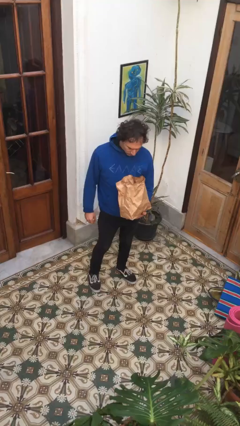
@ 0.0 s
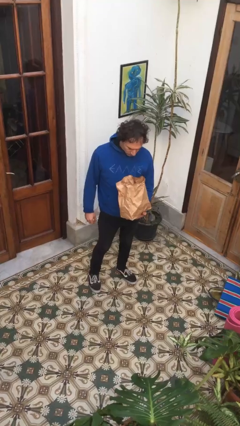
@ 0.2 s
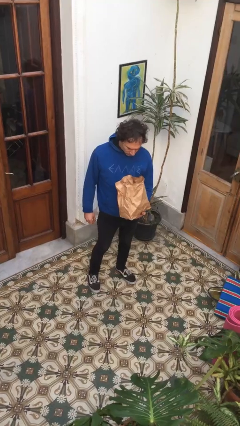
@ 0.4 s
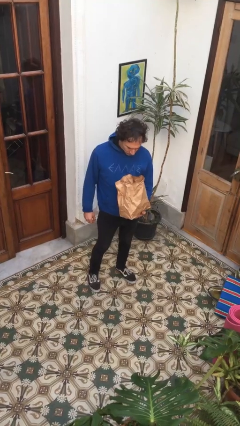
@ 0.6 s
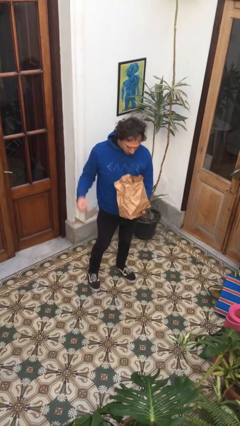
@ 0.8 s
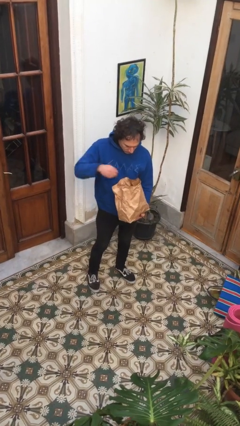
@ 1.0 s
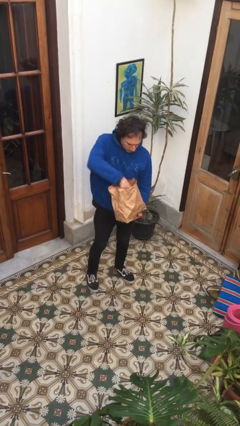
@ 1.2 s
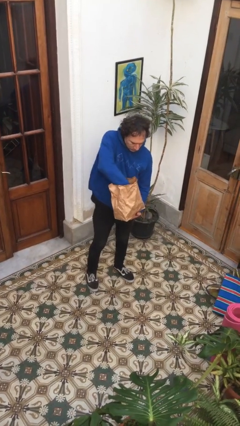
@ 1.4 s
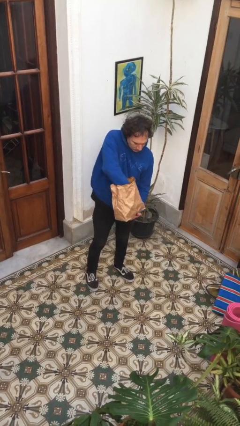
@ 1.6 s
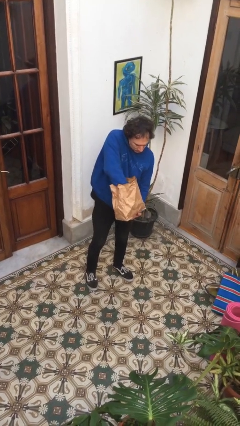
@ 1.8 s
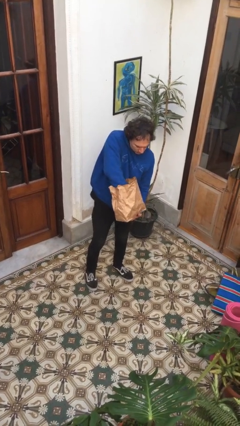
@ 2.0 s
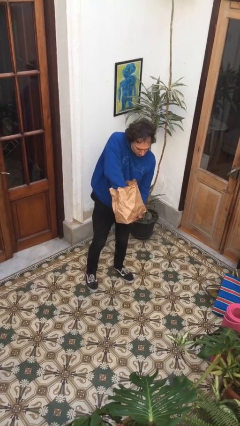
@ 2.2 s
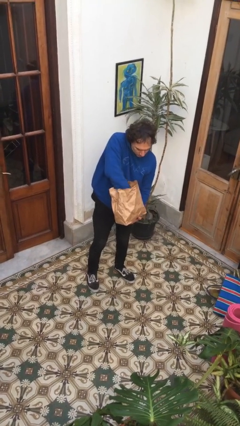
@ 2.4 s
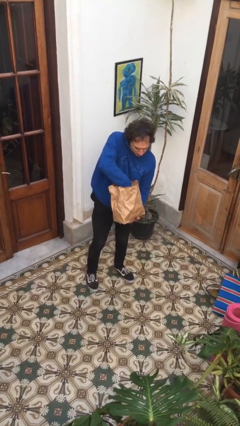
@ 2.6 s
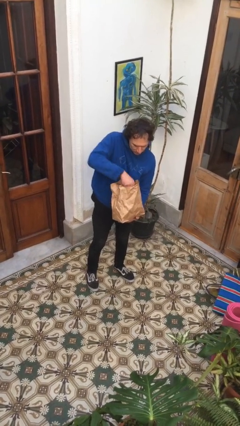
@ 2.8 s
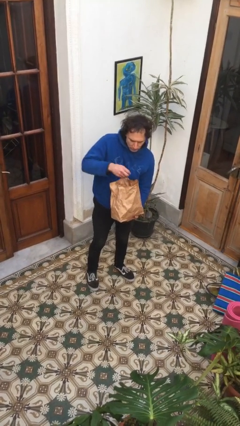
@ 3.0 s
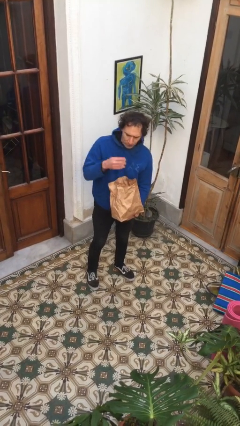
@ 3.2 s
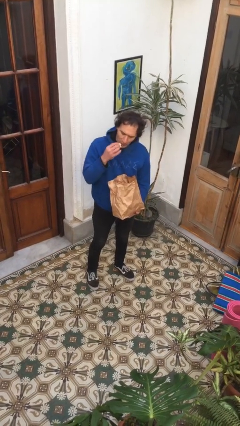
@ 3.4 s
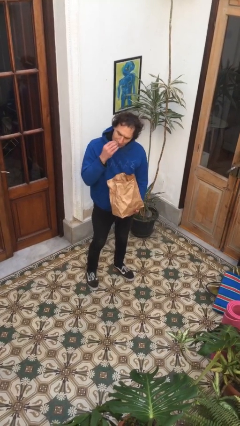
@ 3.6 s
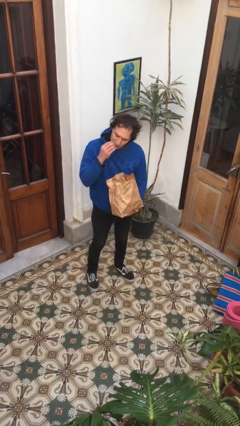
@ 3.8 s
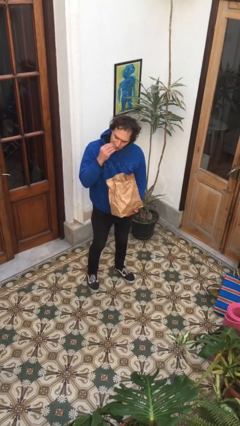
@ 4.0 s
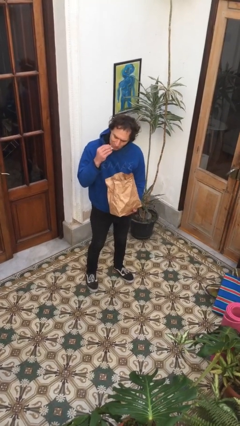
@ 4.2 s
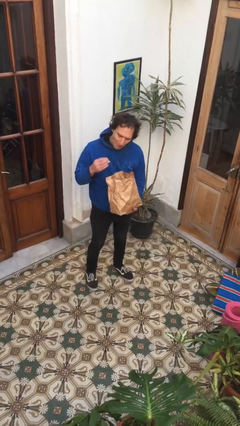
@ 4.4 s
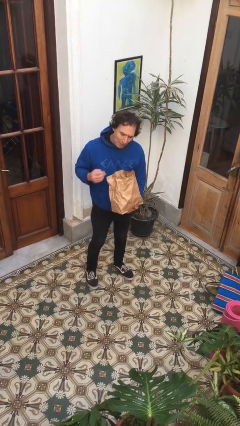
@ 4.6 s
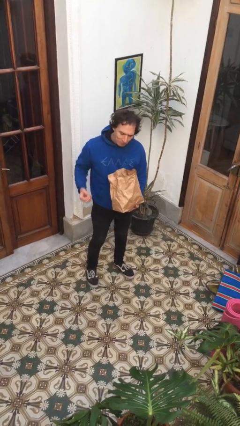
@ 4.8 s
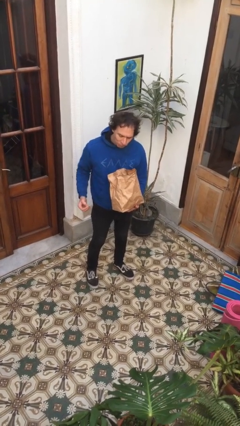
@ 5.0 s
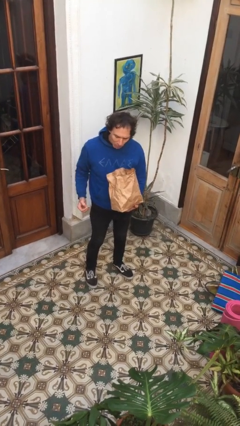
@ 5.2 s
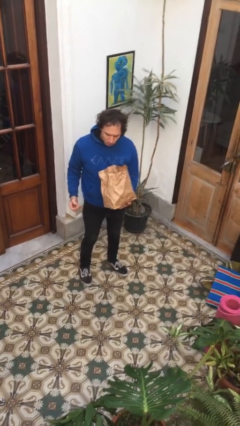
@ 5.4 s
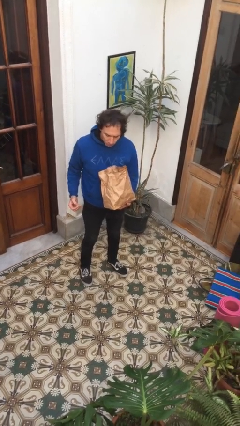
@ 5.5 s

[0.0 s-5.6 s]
person eats snack from bag

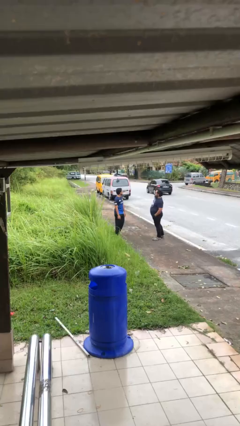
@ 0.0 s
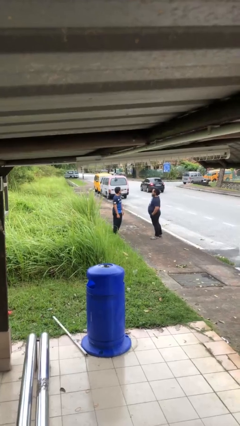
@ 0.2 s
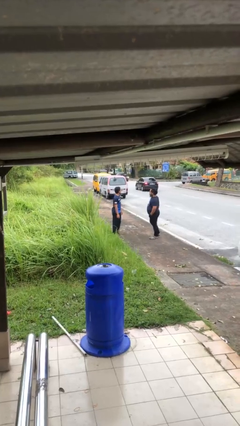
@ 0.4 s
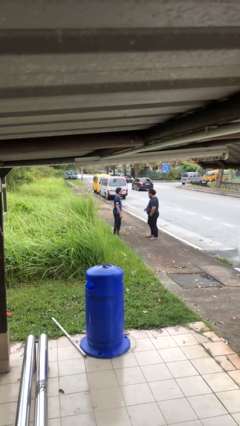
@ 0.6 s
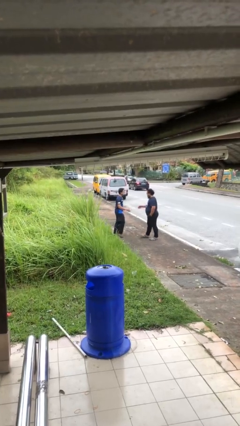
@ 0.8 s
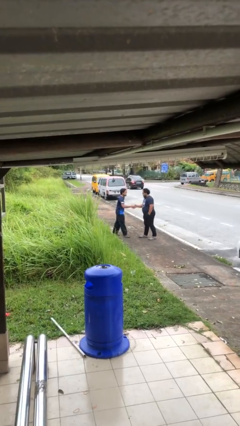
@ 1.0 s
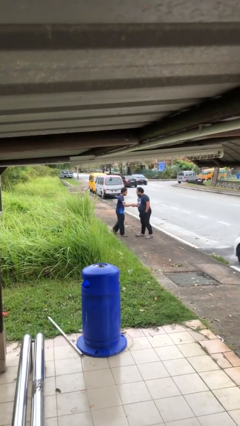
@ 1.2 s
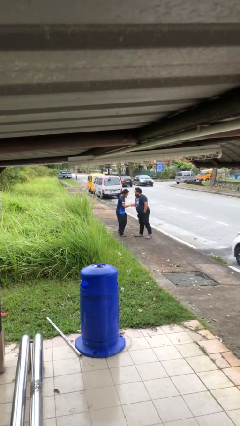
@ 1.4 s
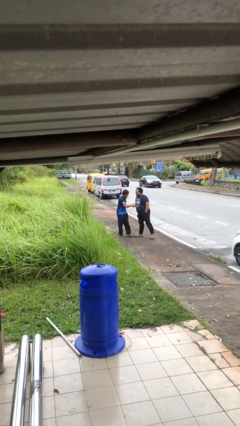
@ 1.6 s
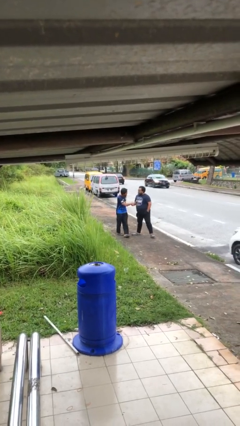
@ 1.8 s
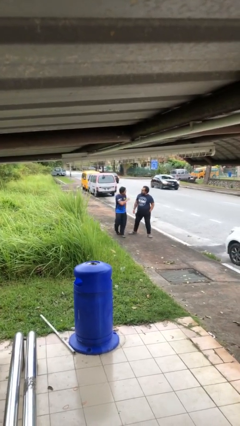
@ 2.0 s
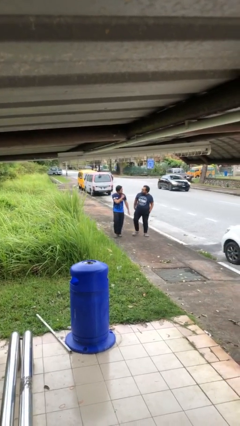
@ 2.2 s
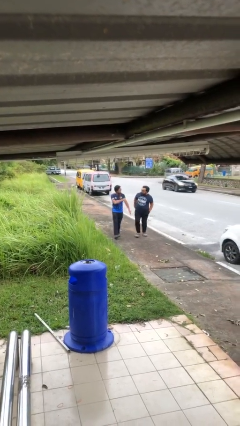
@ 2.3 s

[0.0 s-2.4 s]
person shakes hand

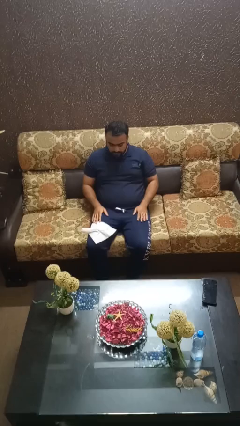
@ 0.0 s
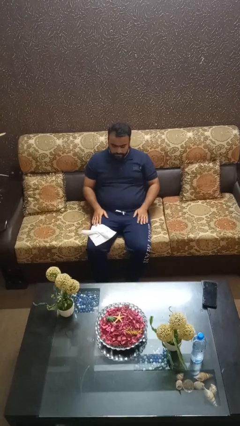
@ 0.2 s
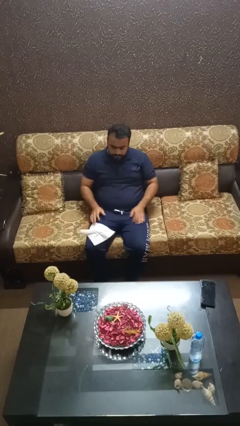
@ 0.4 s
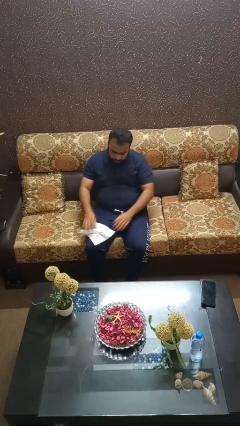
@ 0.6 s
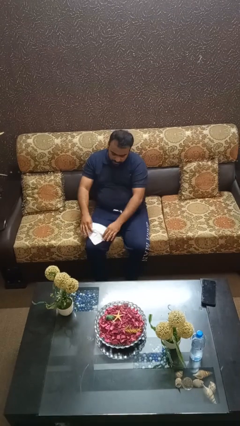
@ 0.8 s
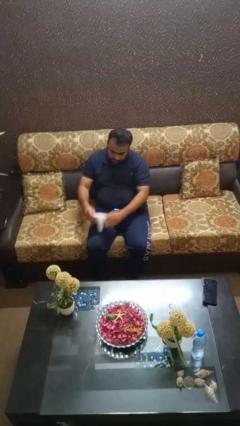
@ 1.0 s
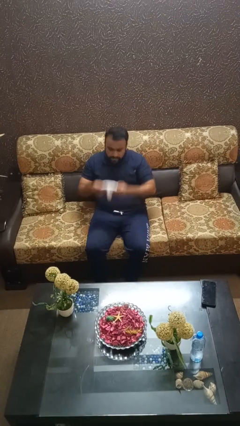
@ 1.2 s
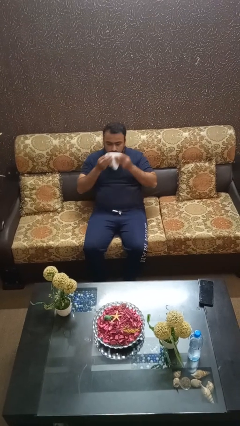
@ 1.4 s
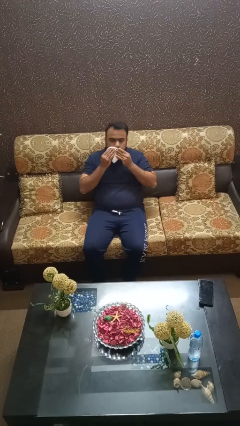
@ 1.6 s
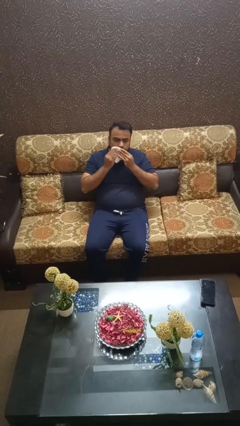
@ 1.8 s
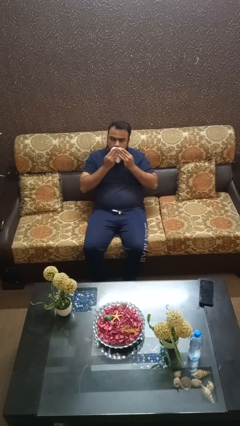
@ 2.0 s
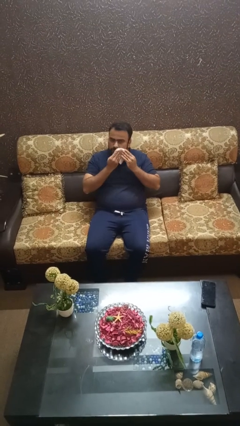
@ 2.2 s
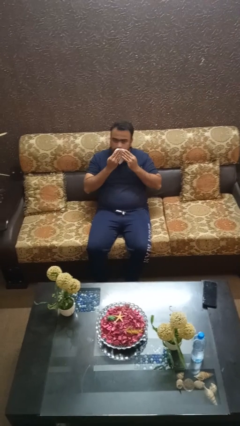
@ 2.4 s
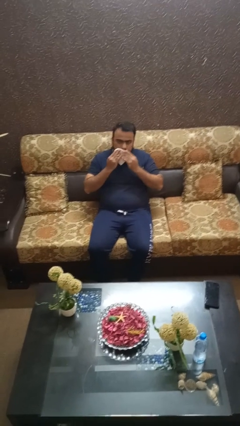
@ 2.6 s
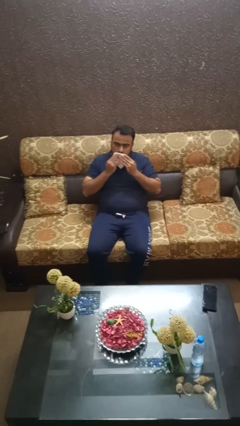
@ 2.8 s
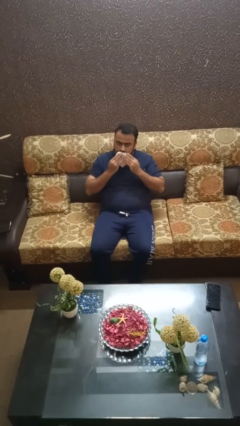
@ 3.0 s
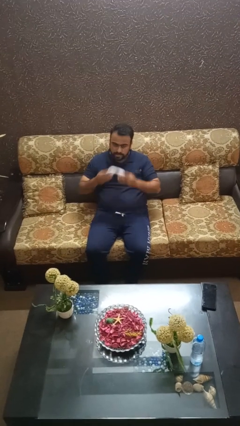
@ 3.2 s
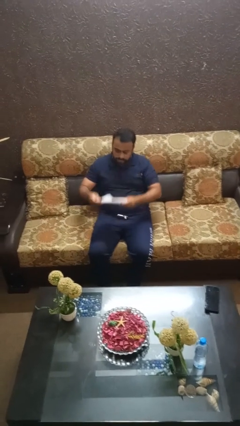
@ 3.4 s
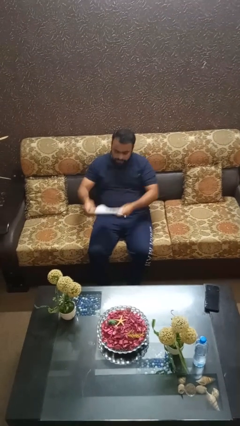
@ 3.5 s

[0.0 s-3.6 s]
person wipes mouth with napkin

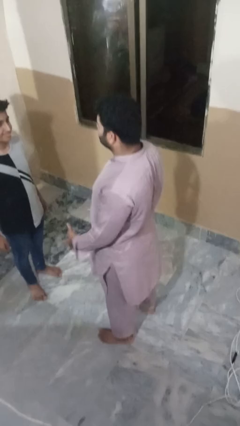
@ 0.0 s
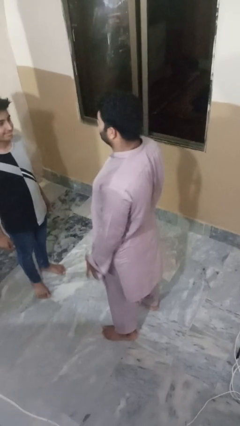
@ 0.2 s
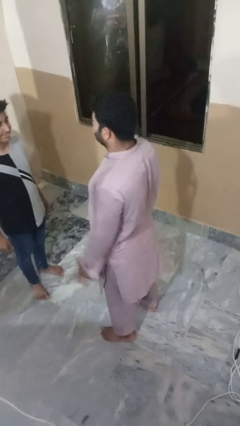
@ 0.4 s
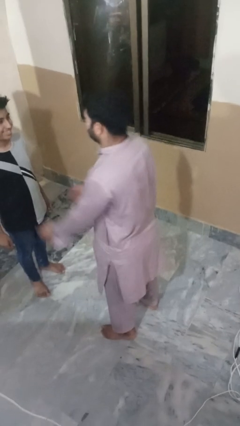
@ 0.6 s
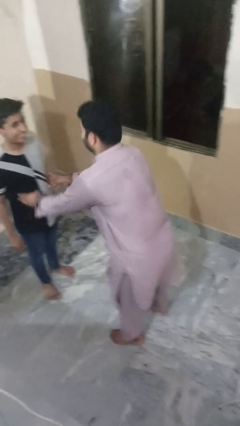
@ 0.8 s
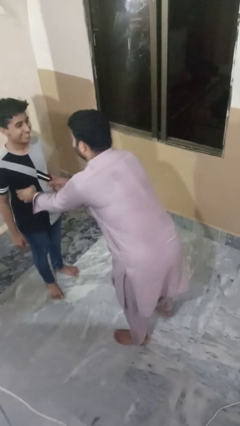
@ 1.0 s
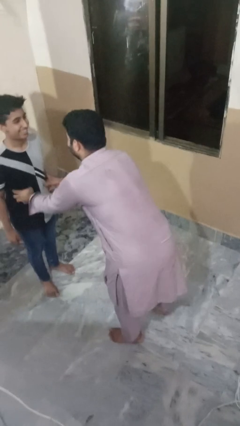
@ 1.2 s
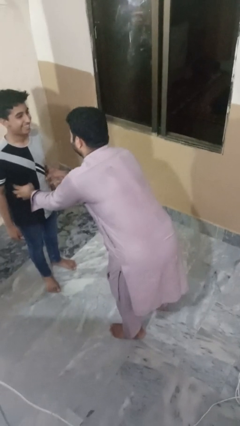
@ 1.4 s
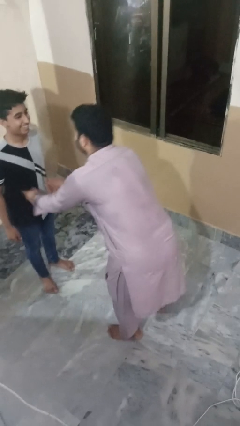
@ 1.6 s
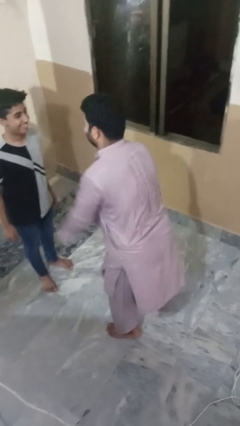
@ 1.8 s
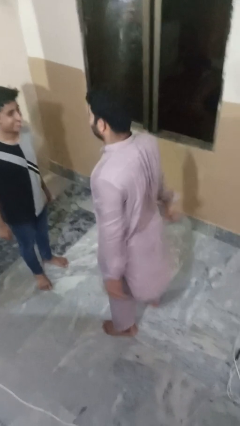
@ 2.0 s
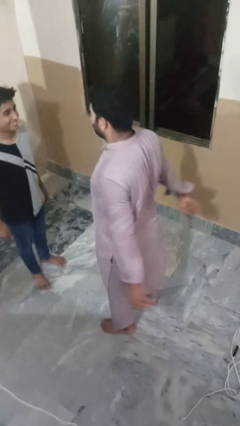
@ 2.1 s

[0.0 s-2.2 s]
person tickles person

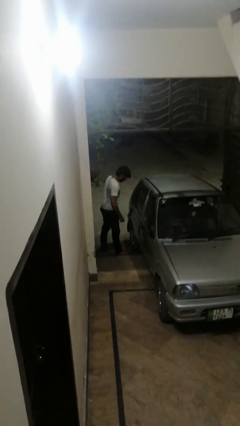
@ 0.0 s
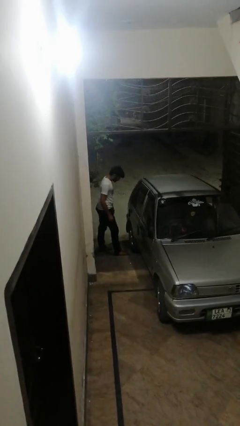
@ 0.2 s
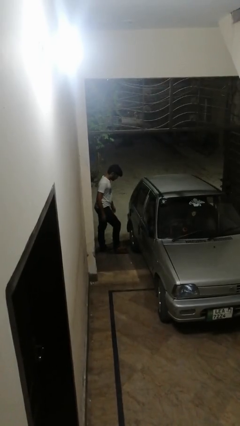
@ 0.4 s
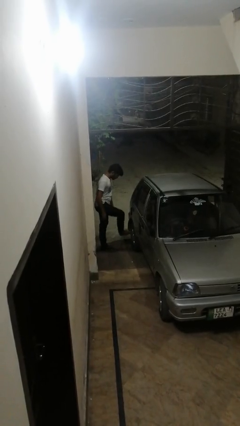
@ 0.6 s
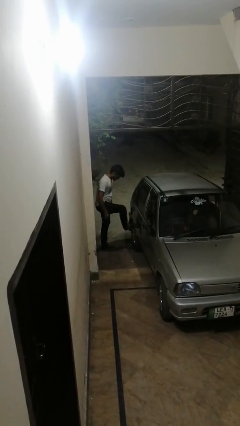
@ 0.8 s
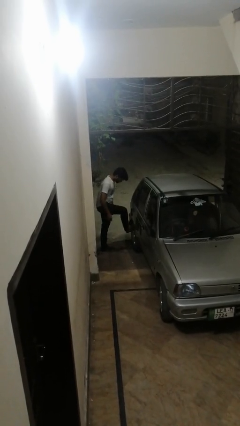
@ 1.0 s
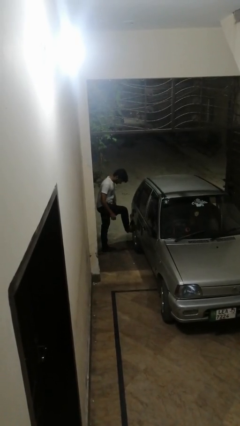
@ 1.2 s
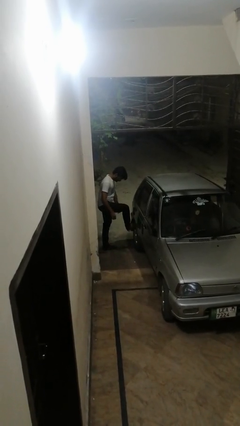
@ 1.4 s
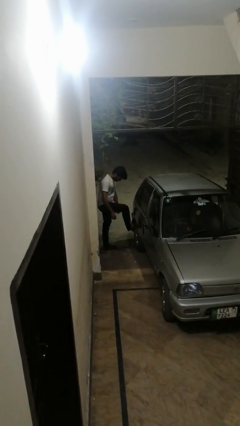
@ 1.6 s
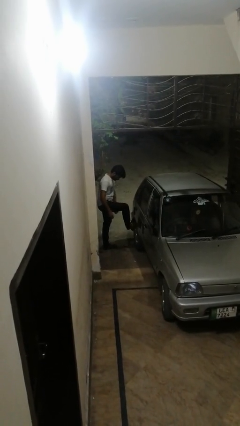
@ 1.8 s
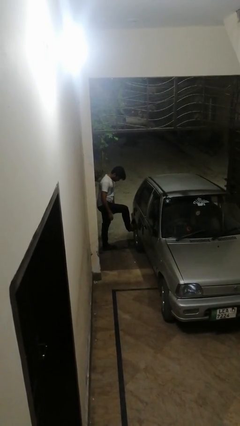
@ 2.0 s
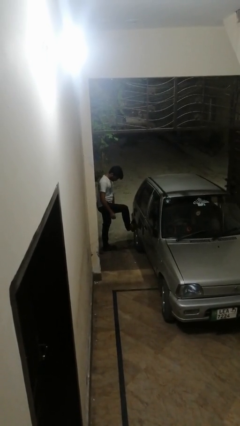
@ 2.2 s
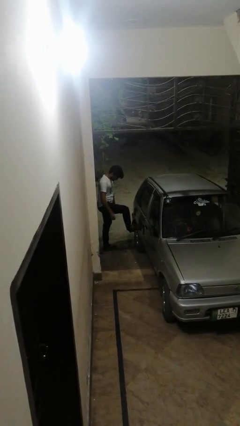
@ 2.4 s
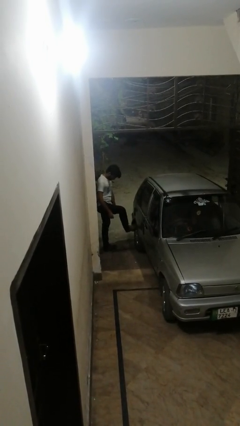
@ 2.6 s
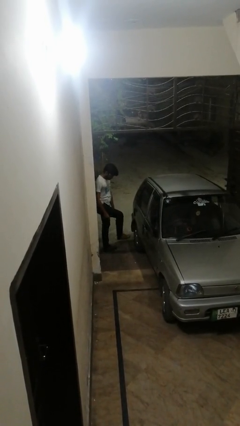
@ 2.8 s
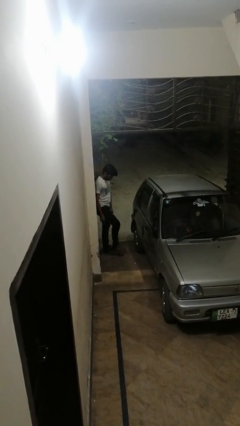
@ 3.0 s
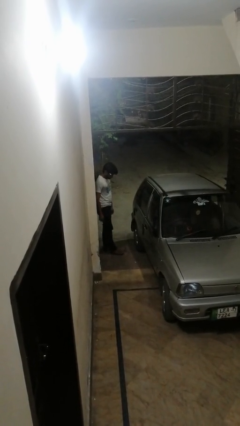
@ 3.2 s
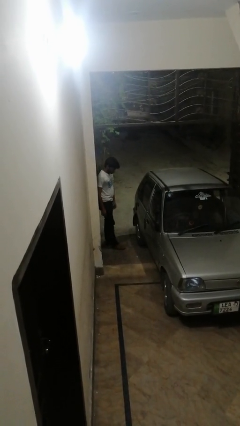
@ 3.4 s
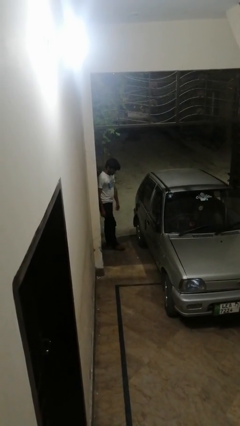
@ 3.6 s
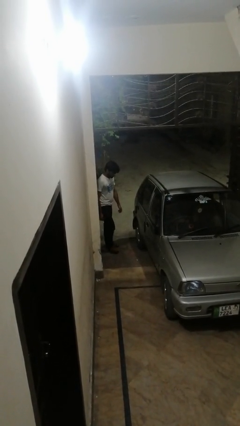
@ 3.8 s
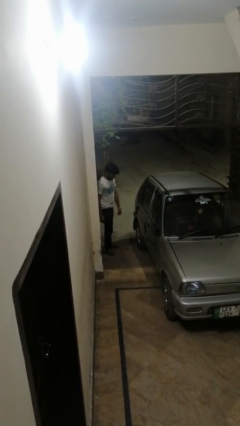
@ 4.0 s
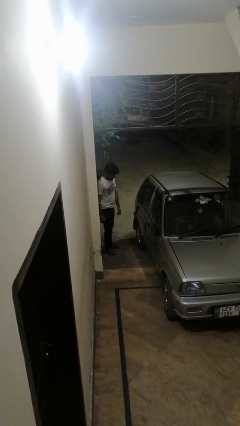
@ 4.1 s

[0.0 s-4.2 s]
person kicks car tires
